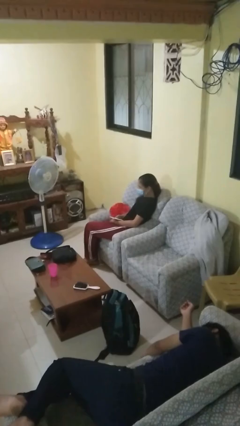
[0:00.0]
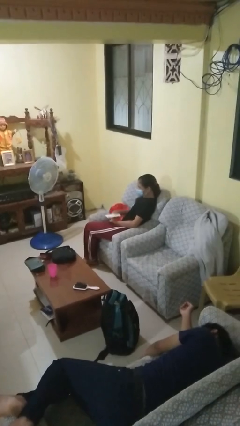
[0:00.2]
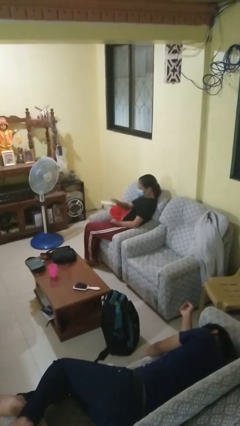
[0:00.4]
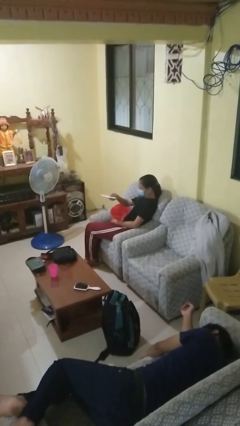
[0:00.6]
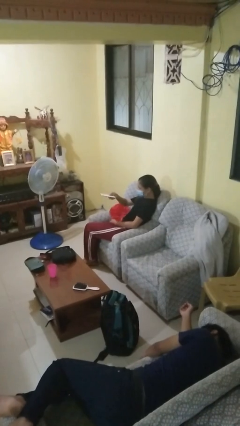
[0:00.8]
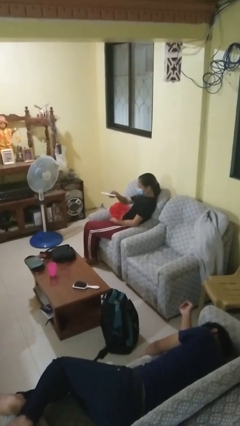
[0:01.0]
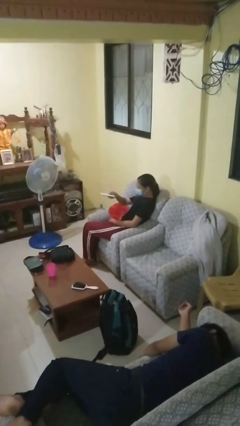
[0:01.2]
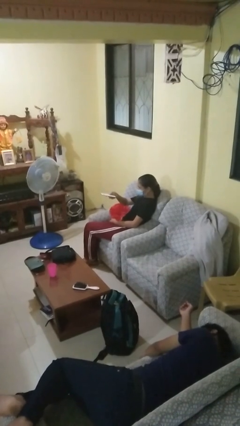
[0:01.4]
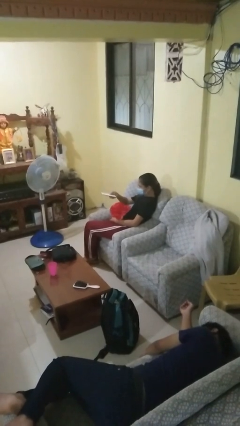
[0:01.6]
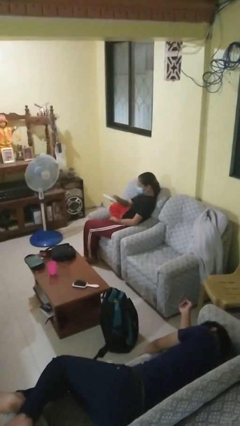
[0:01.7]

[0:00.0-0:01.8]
person uses television remote

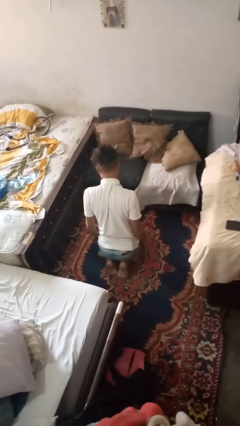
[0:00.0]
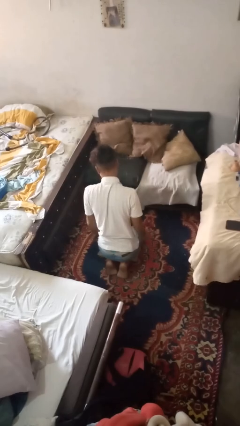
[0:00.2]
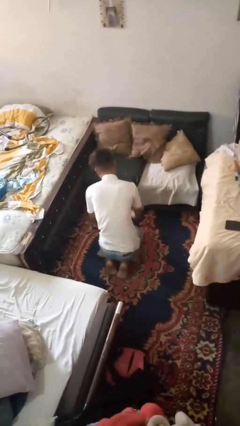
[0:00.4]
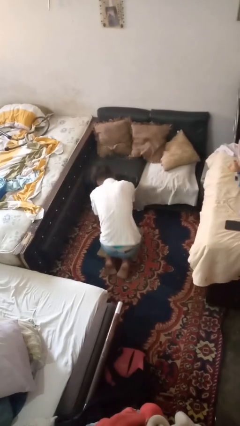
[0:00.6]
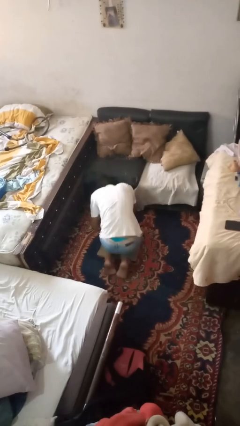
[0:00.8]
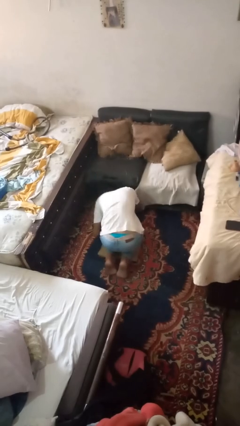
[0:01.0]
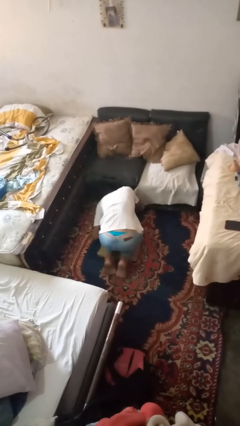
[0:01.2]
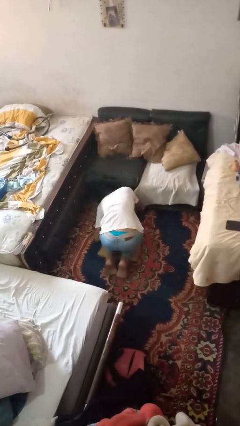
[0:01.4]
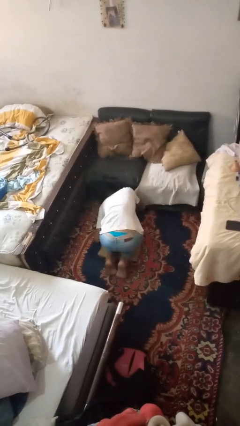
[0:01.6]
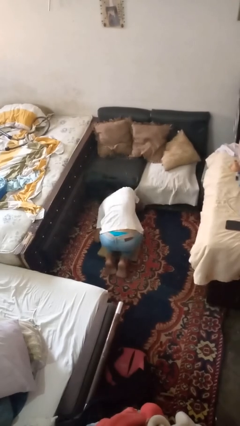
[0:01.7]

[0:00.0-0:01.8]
person searches under couch

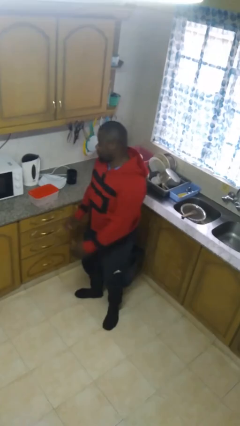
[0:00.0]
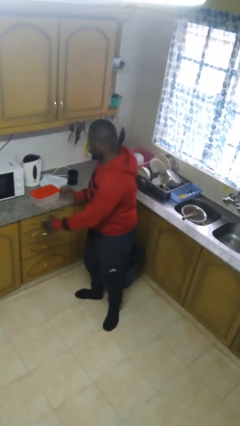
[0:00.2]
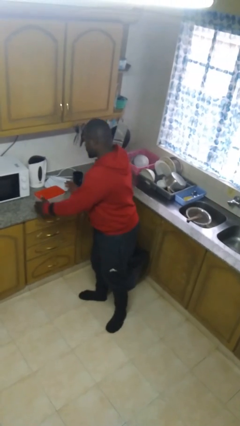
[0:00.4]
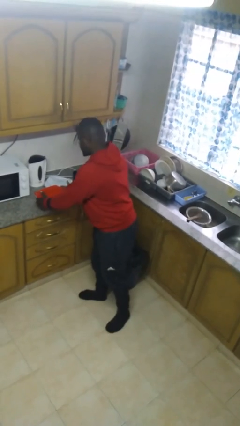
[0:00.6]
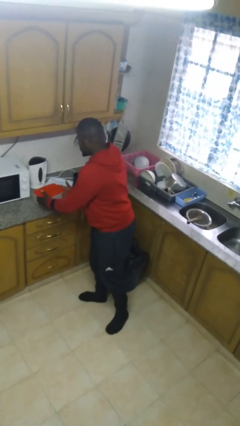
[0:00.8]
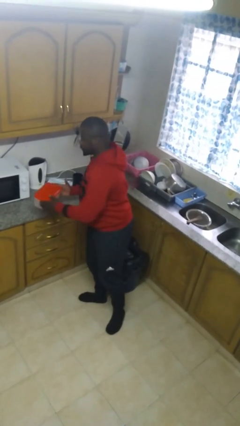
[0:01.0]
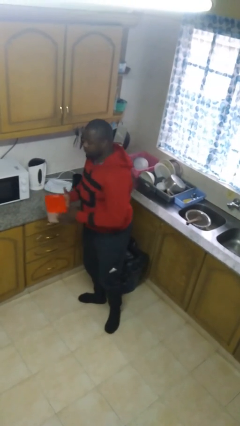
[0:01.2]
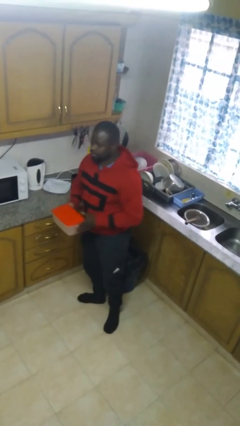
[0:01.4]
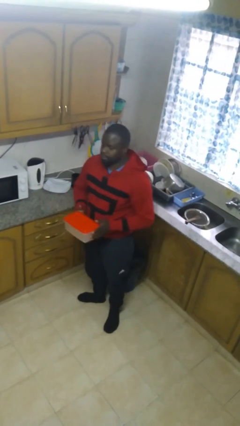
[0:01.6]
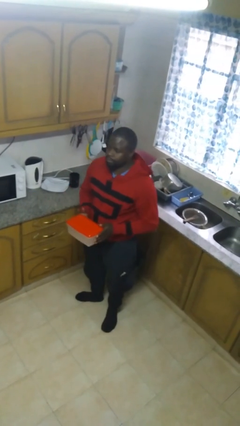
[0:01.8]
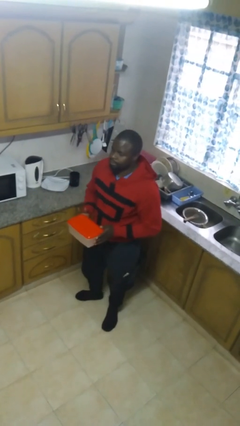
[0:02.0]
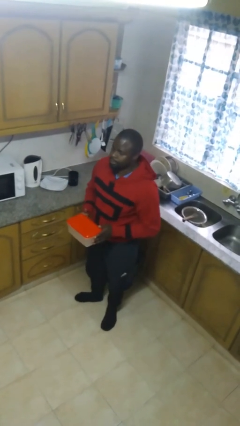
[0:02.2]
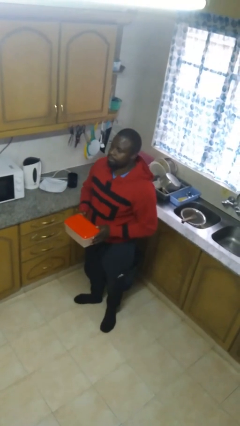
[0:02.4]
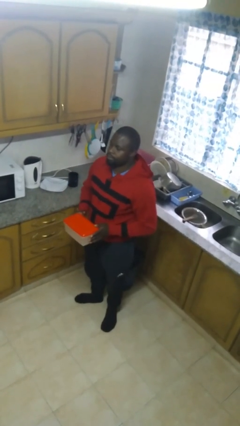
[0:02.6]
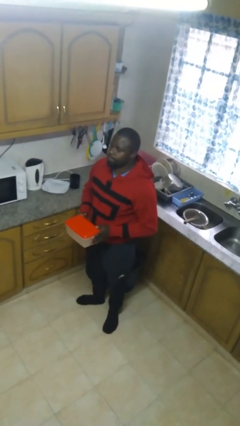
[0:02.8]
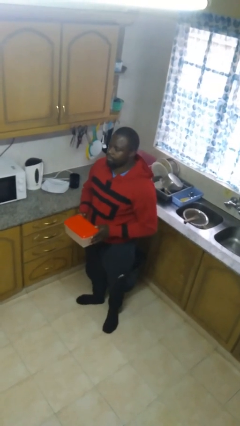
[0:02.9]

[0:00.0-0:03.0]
person picks up object from countertop

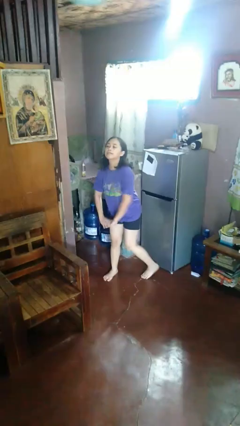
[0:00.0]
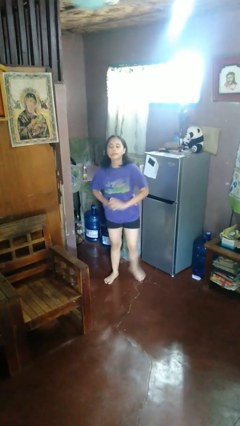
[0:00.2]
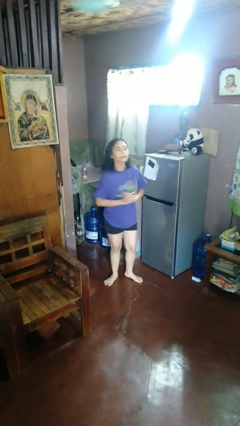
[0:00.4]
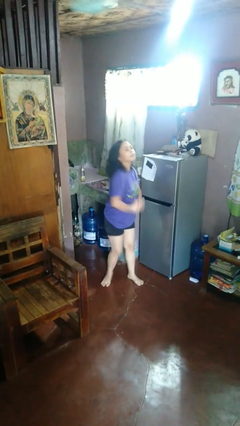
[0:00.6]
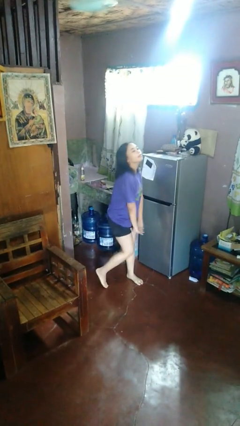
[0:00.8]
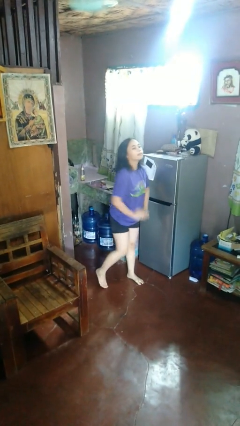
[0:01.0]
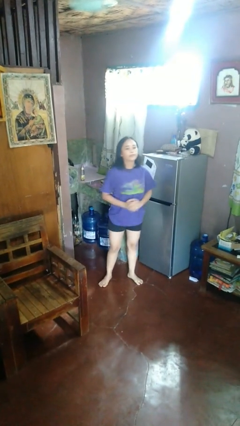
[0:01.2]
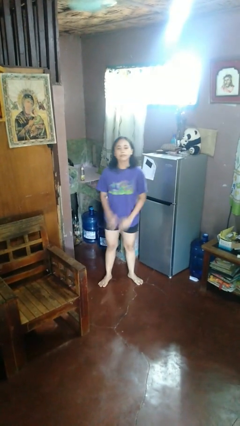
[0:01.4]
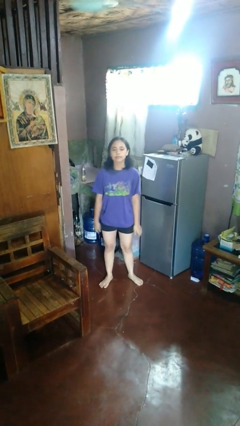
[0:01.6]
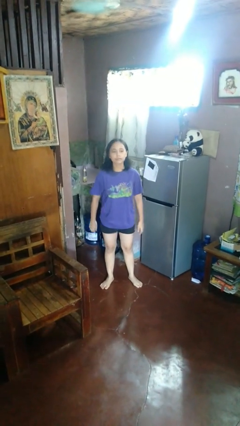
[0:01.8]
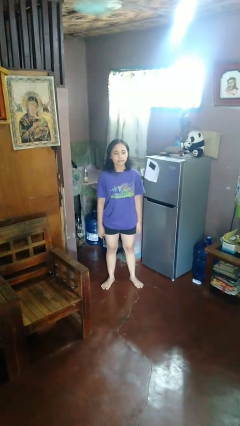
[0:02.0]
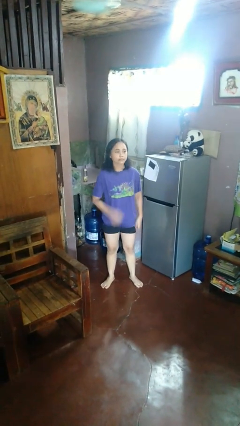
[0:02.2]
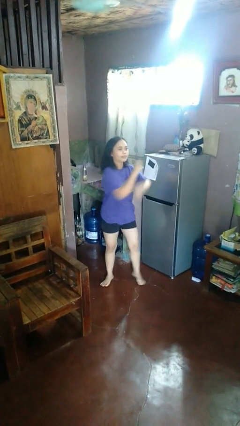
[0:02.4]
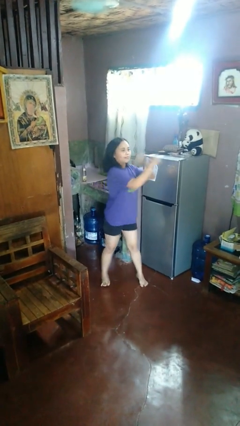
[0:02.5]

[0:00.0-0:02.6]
person dances in place

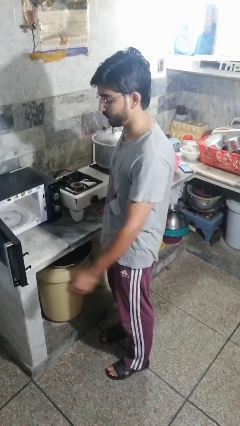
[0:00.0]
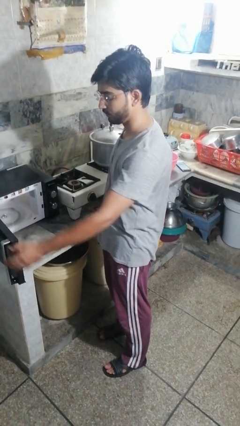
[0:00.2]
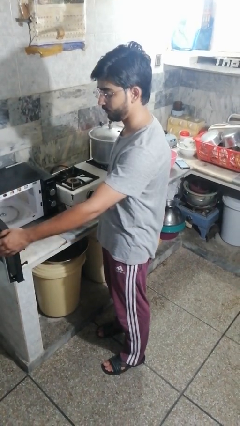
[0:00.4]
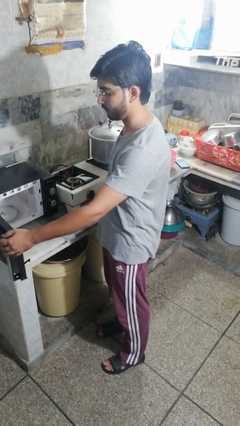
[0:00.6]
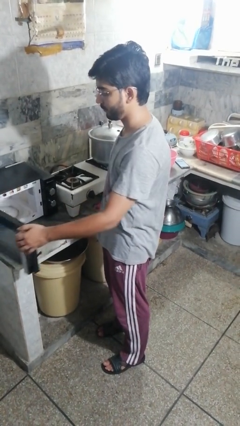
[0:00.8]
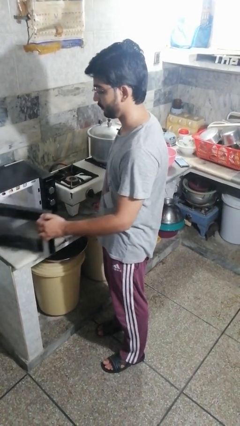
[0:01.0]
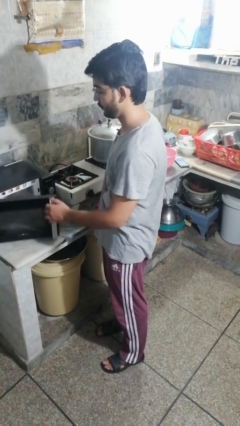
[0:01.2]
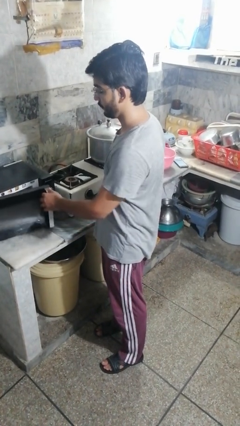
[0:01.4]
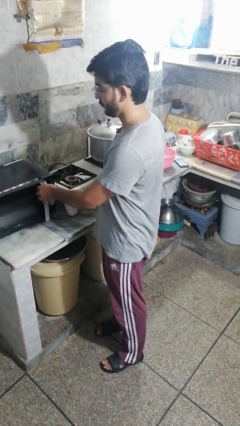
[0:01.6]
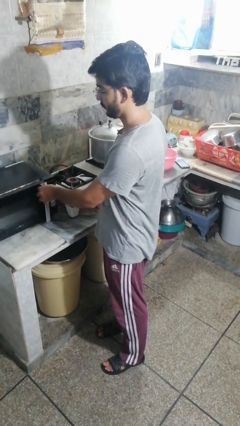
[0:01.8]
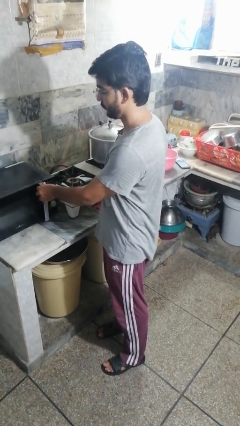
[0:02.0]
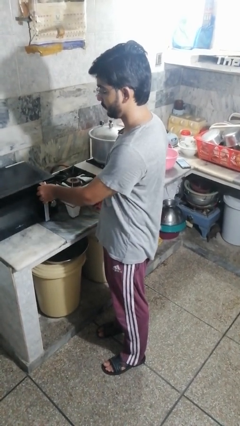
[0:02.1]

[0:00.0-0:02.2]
person closes oven door

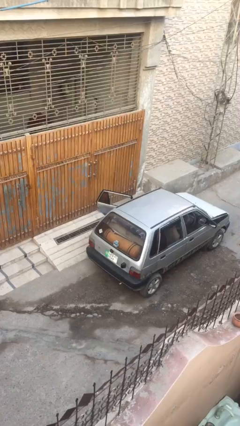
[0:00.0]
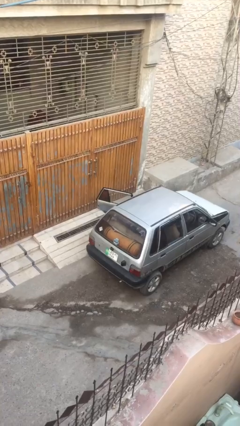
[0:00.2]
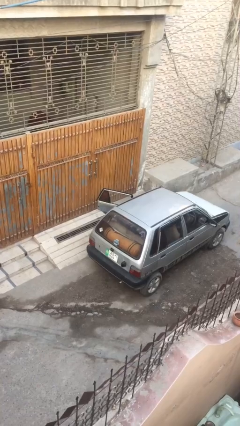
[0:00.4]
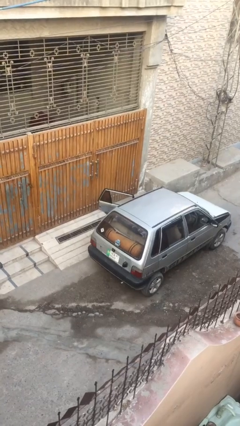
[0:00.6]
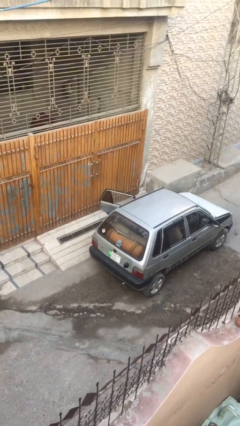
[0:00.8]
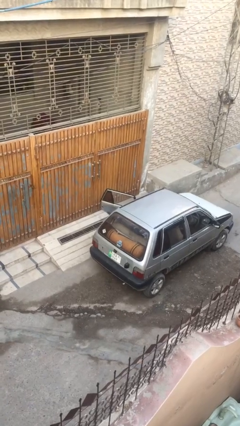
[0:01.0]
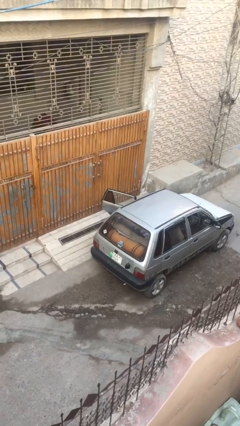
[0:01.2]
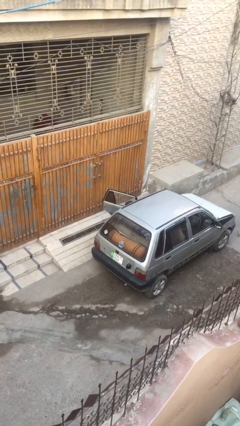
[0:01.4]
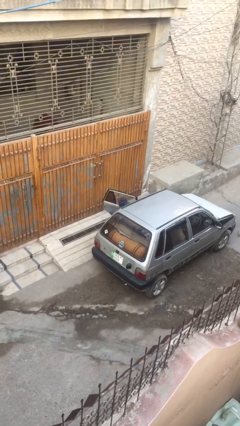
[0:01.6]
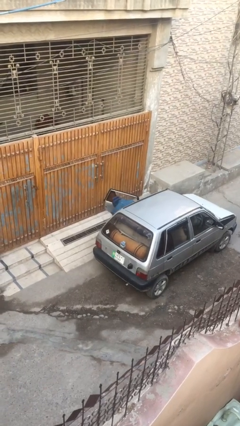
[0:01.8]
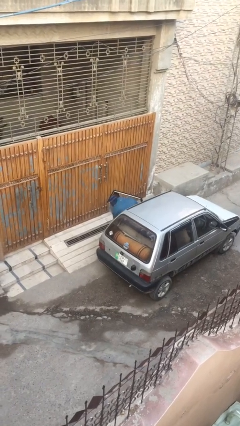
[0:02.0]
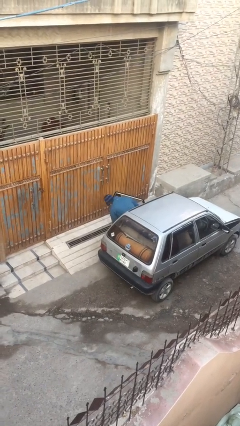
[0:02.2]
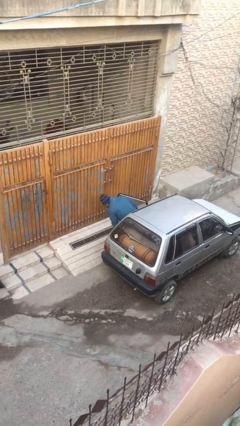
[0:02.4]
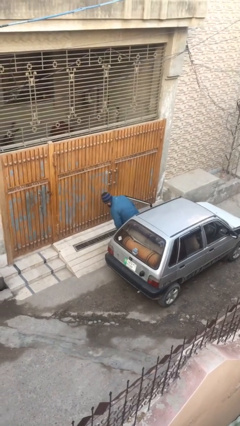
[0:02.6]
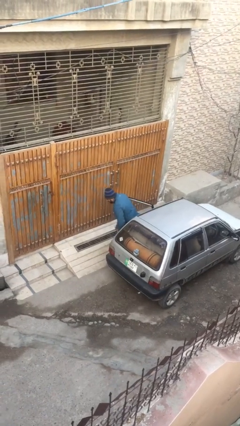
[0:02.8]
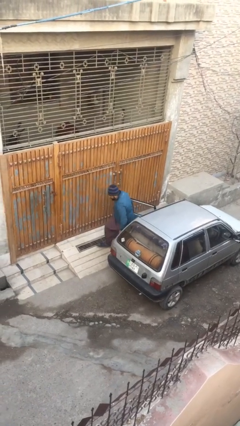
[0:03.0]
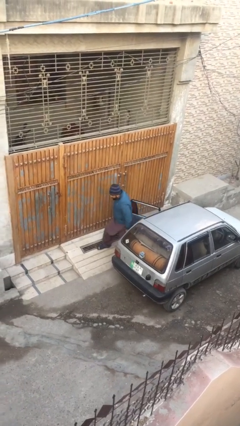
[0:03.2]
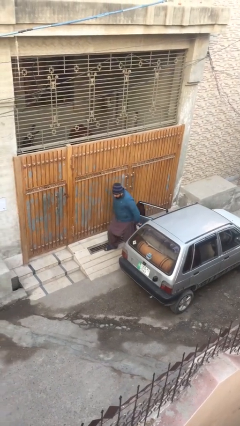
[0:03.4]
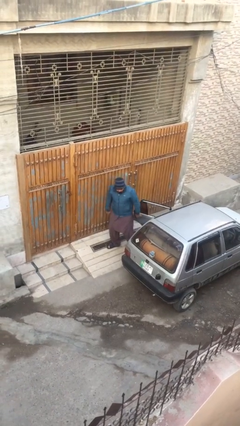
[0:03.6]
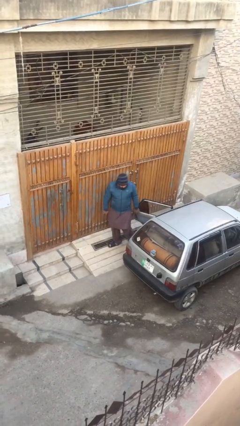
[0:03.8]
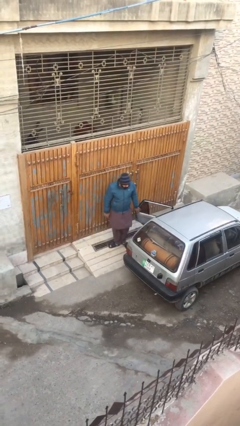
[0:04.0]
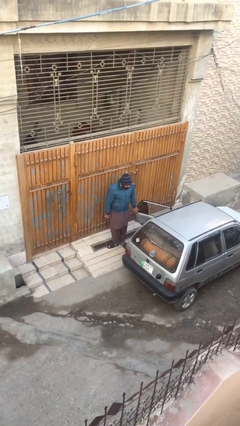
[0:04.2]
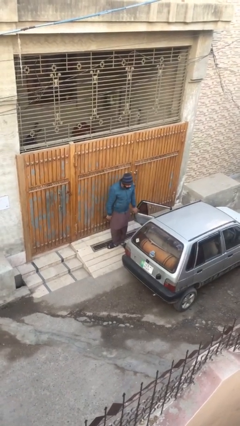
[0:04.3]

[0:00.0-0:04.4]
person exits car

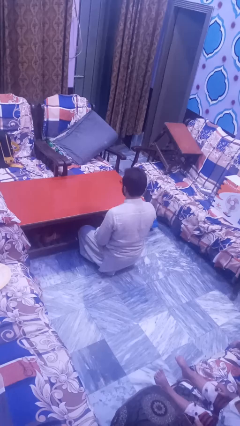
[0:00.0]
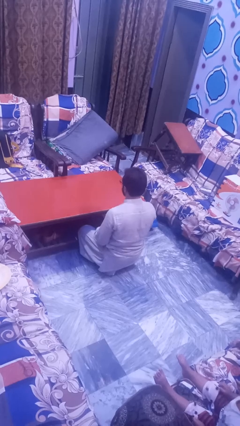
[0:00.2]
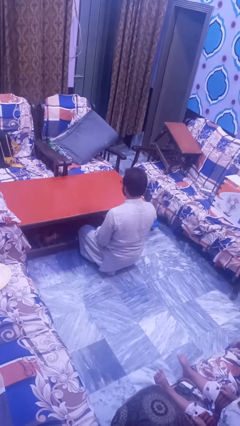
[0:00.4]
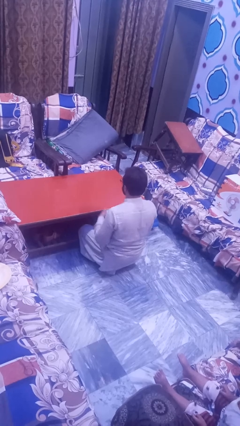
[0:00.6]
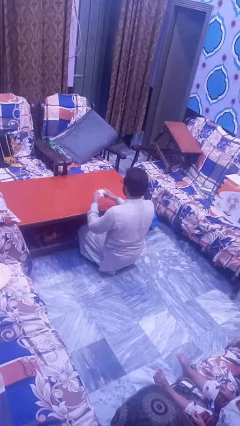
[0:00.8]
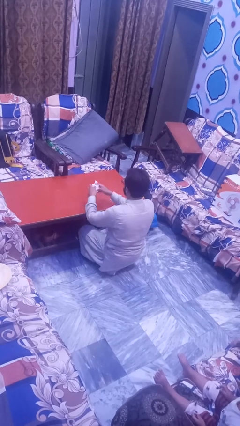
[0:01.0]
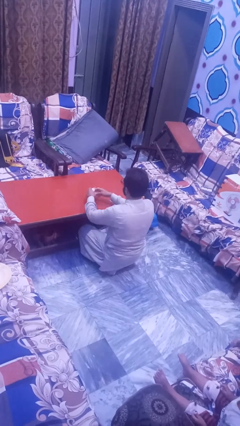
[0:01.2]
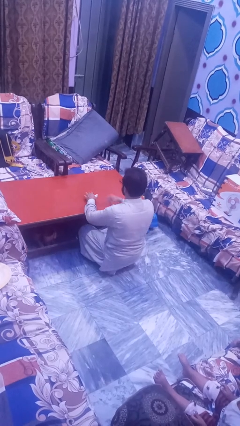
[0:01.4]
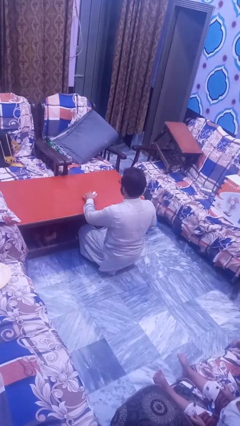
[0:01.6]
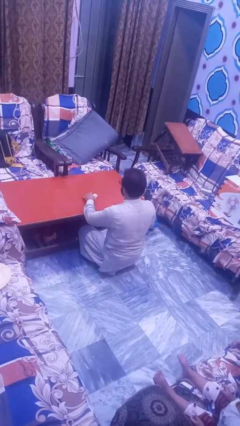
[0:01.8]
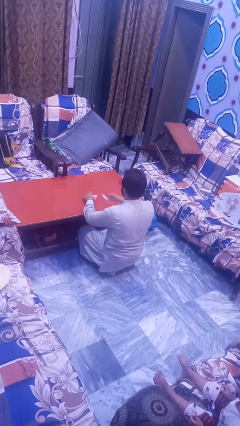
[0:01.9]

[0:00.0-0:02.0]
person tears paper
